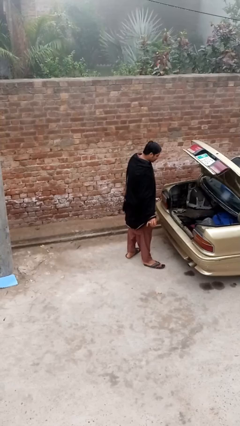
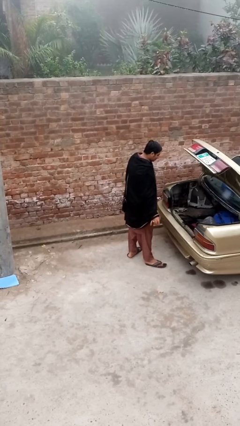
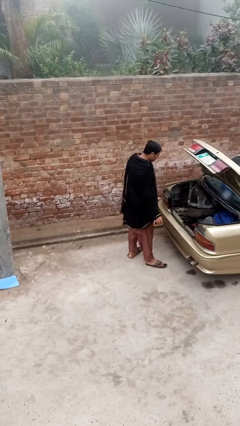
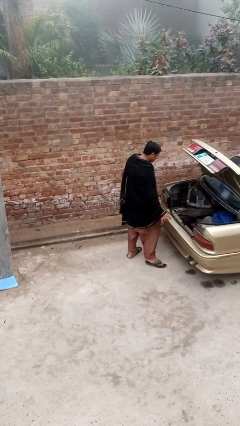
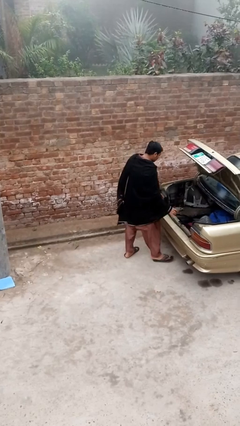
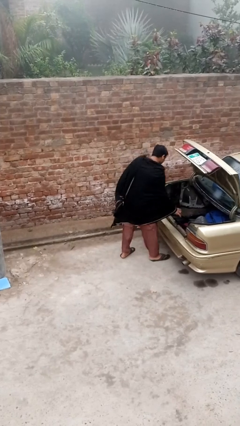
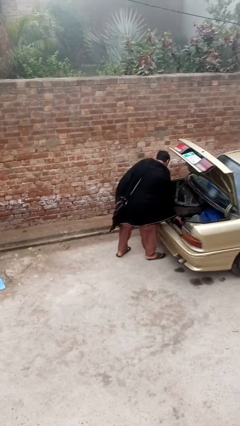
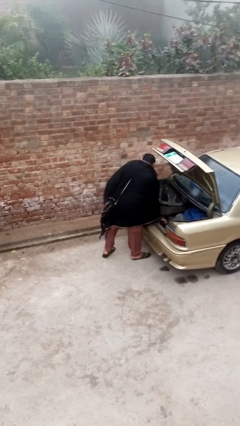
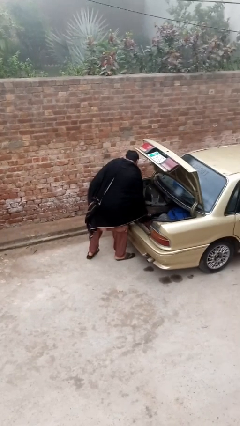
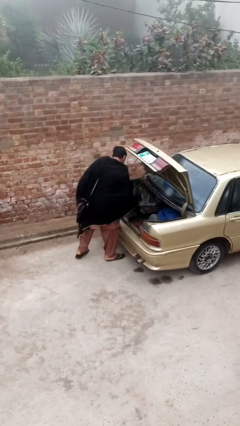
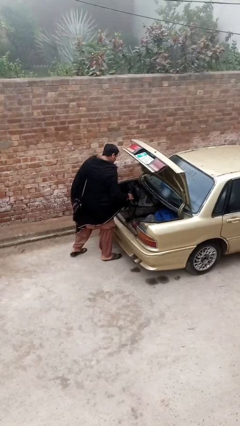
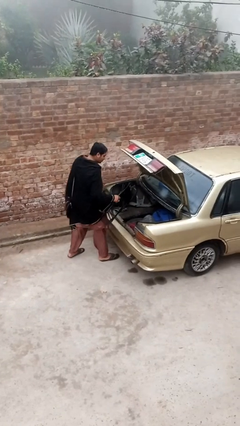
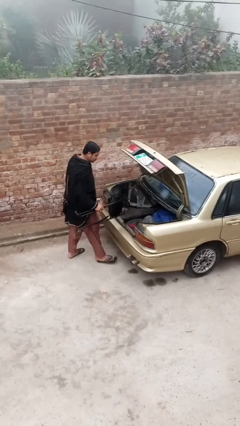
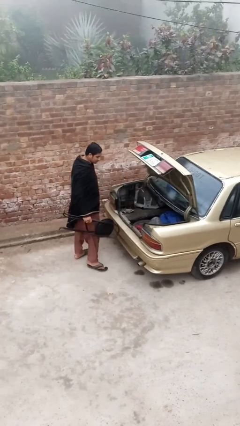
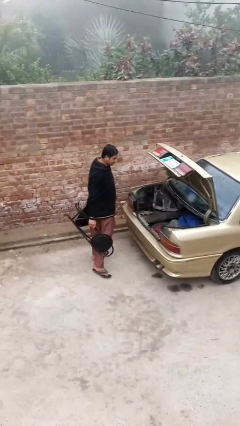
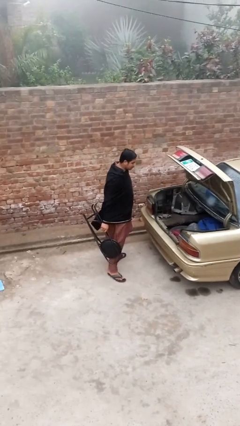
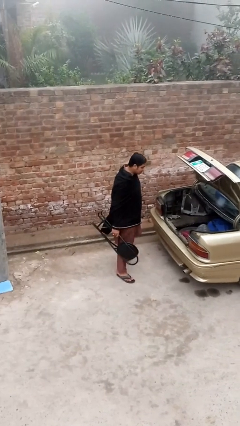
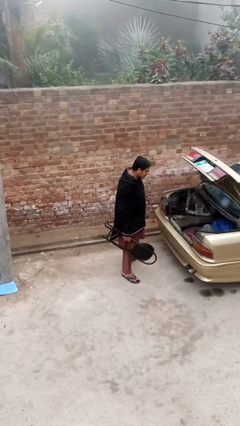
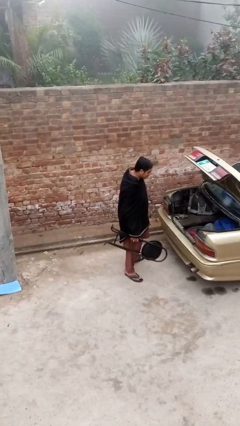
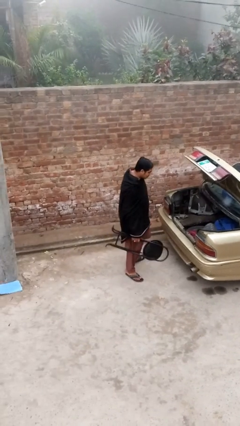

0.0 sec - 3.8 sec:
person unloads car

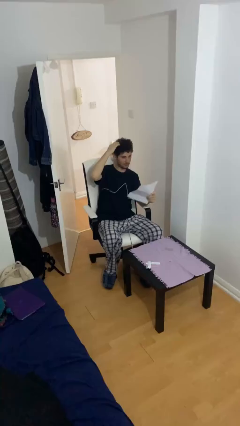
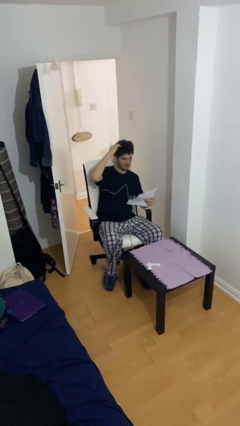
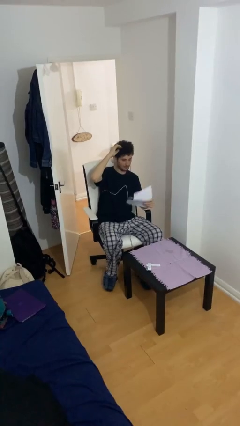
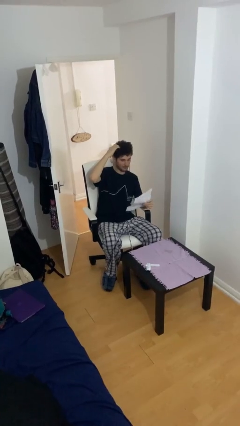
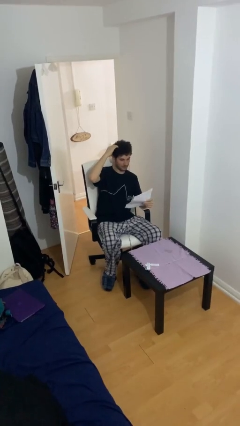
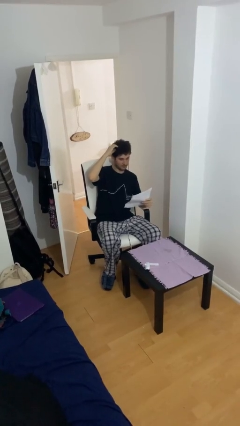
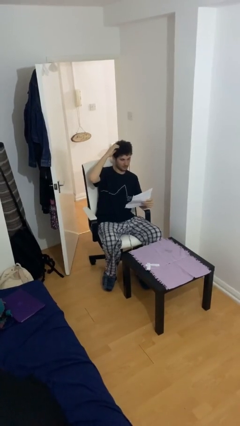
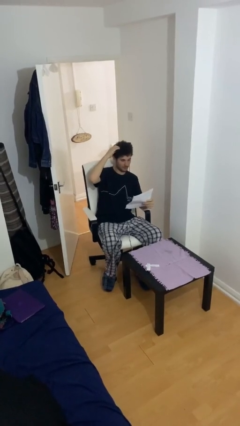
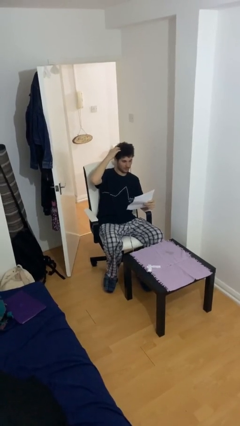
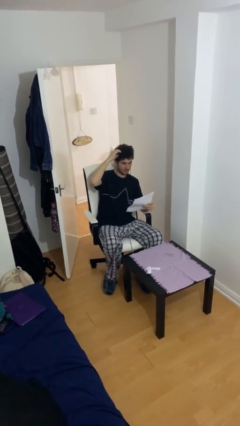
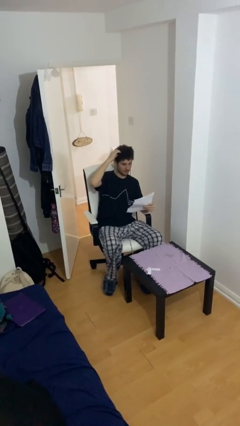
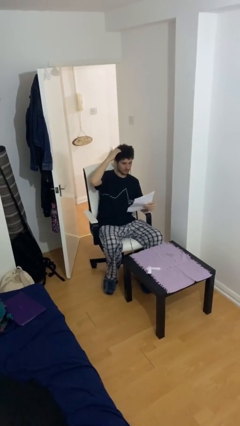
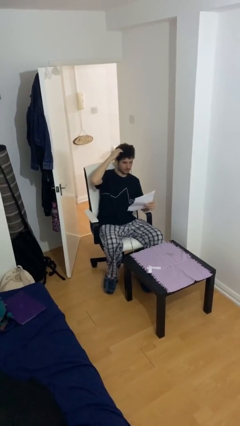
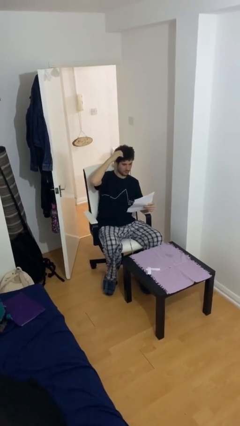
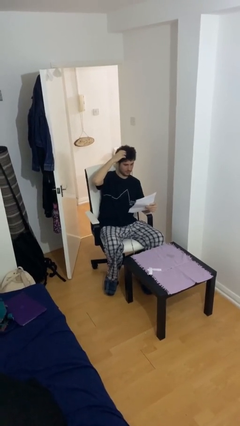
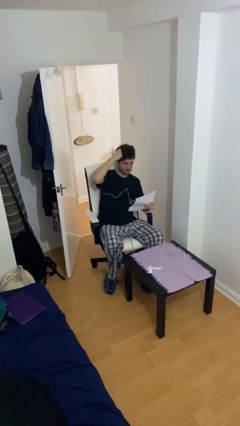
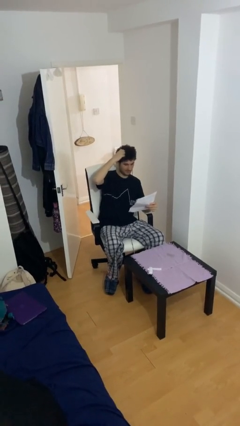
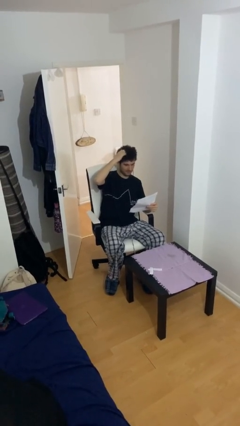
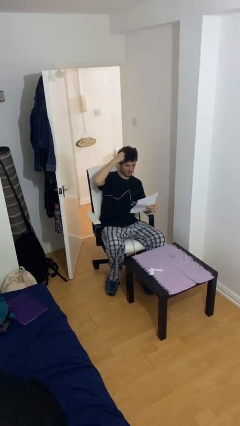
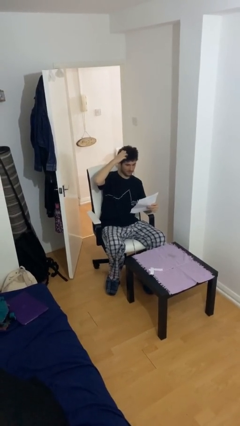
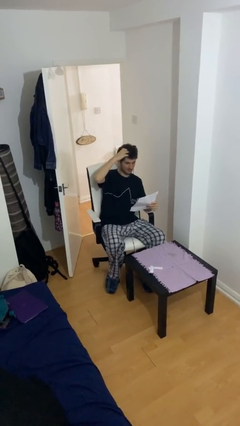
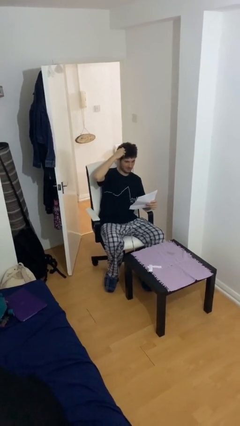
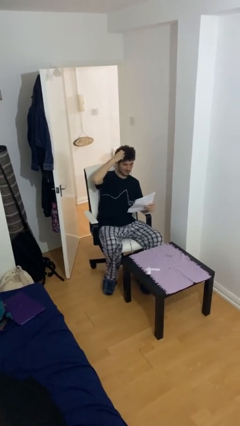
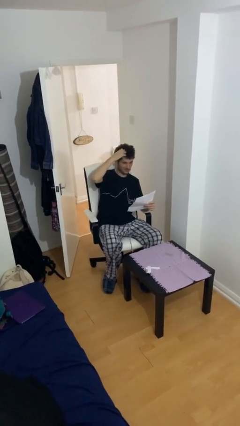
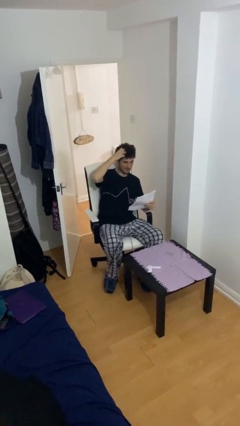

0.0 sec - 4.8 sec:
person reads document

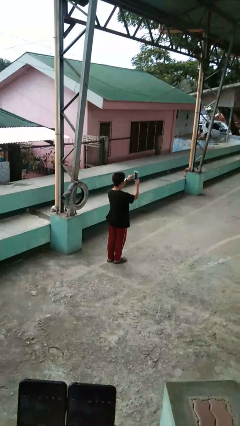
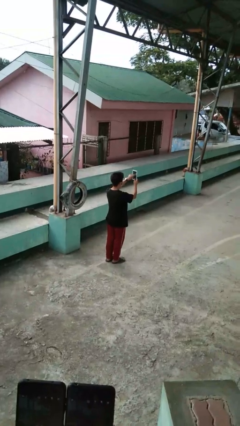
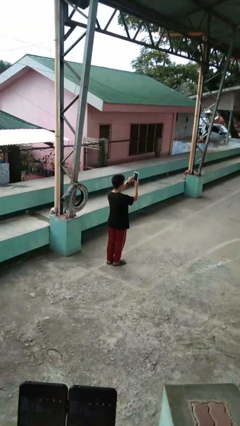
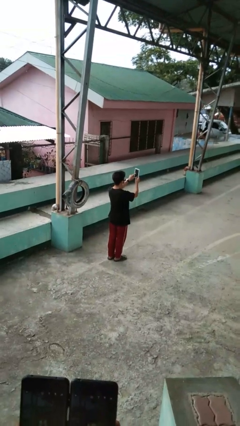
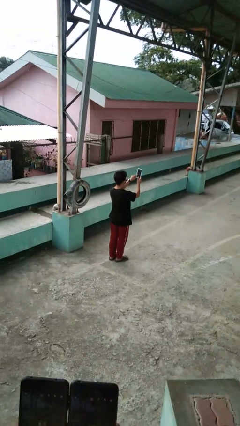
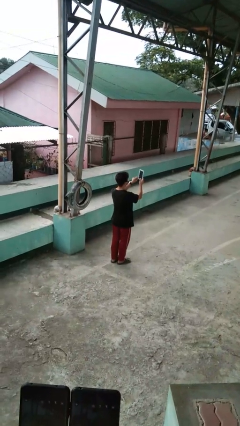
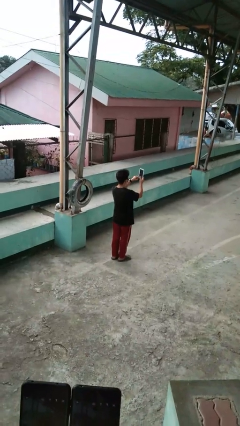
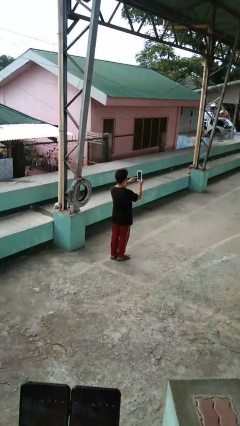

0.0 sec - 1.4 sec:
person interacts with tablet

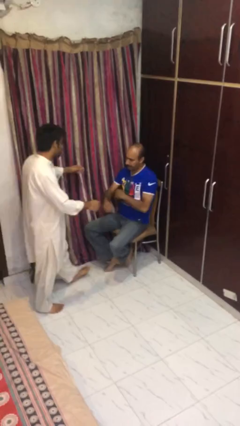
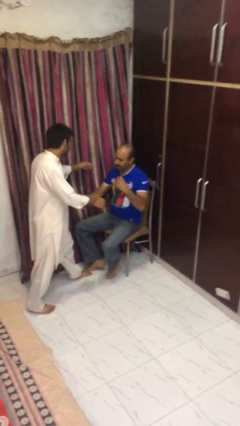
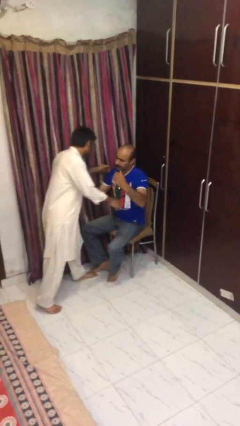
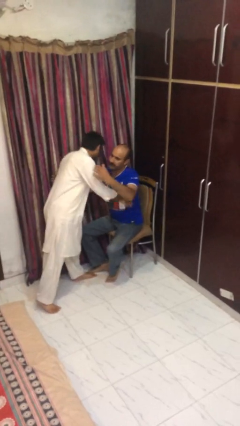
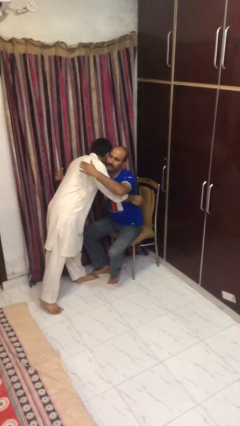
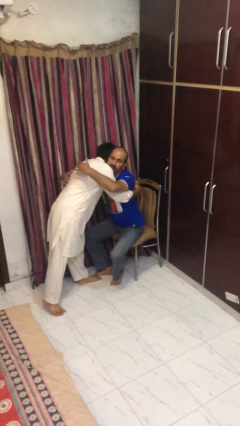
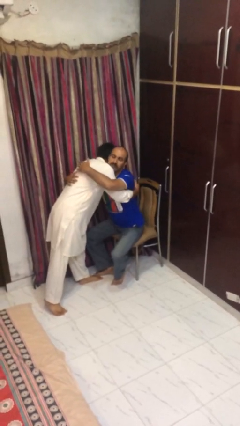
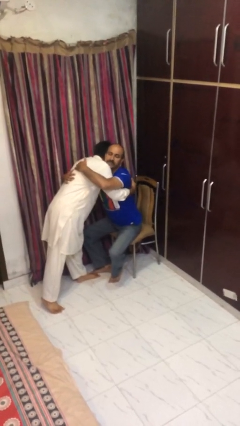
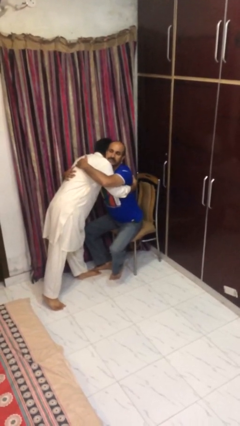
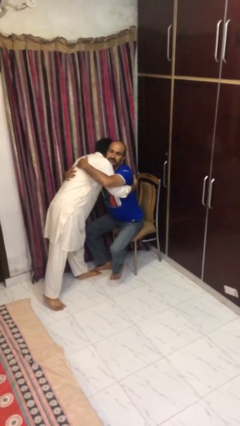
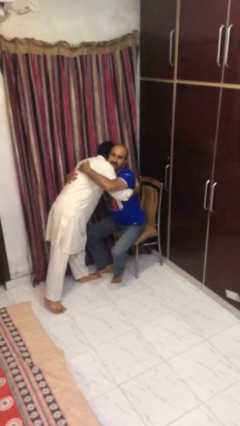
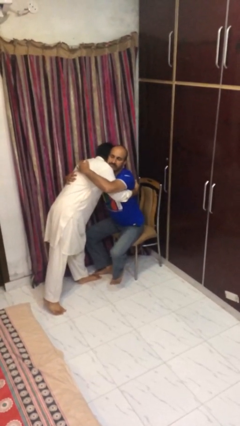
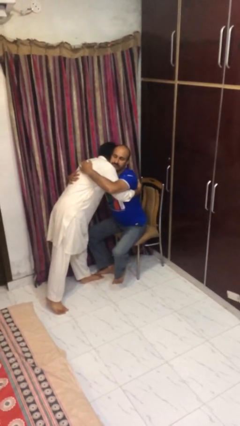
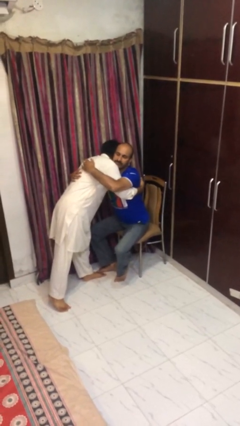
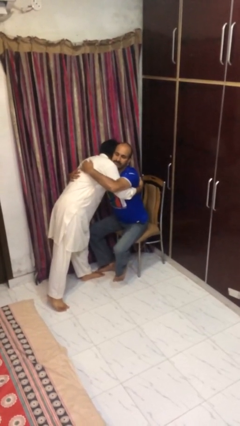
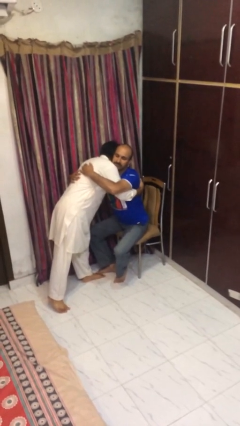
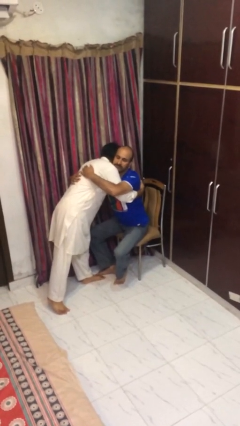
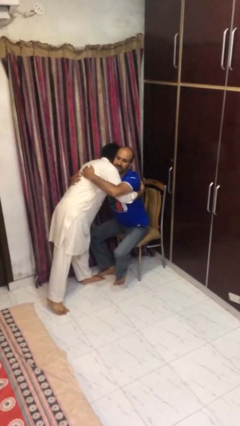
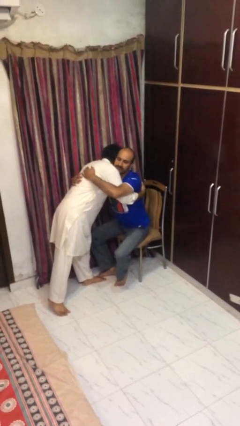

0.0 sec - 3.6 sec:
person embraces person

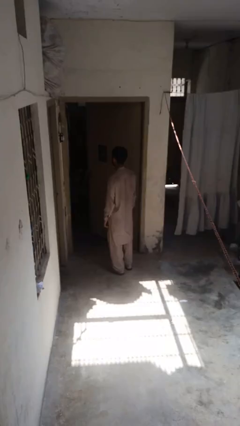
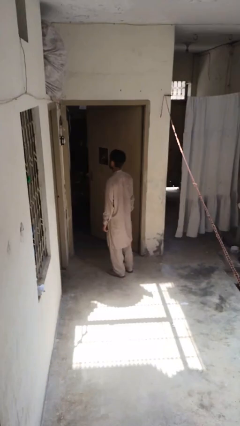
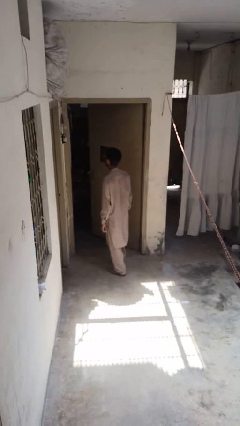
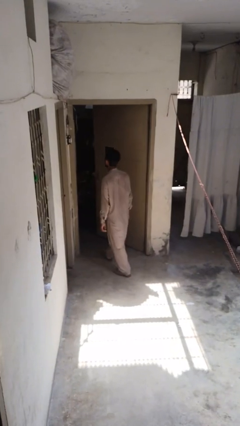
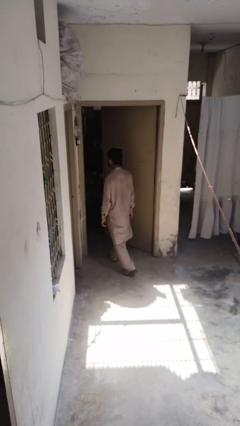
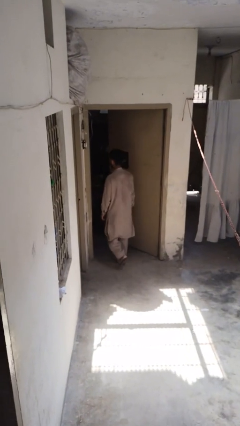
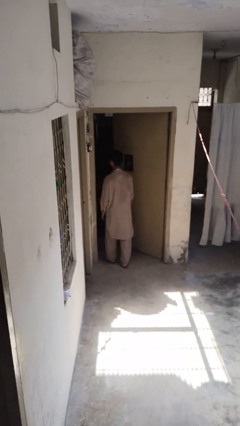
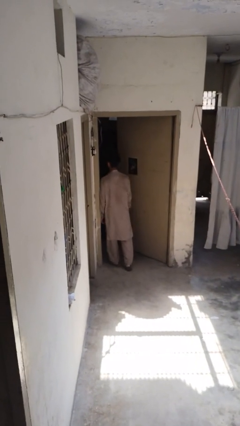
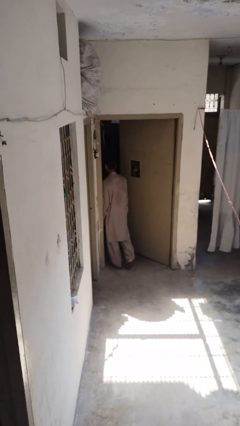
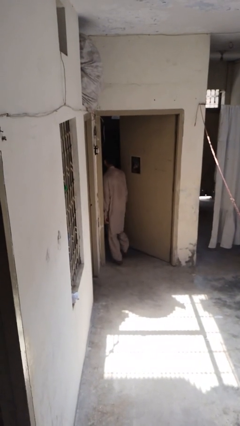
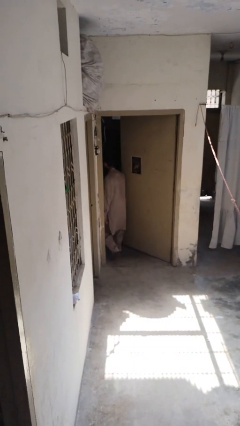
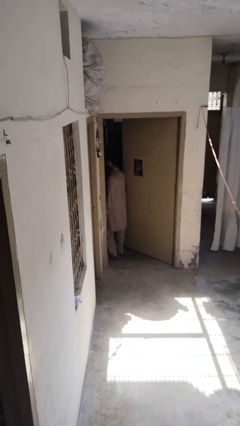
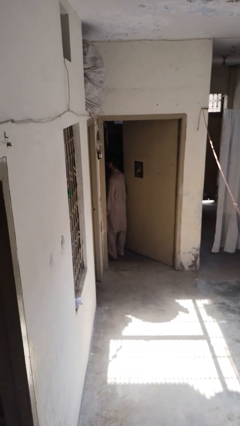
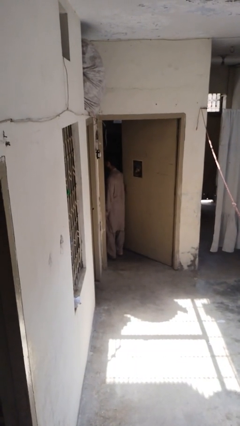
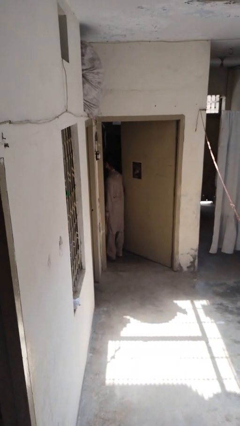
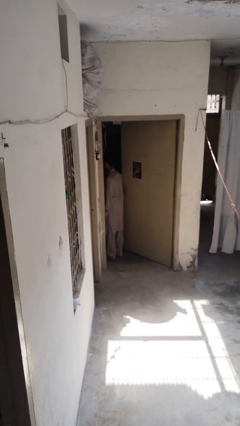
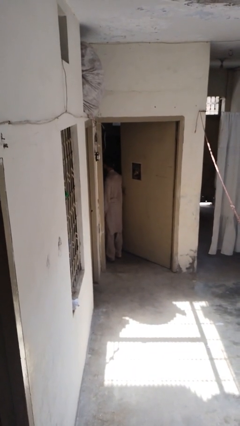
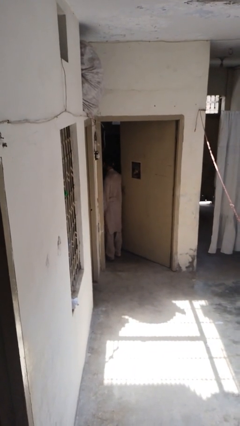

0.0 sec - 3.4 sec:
person bumps into wall

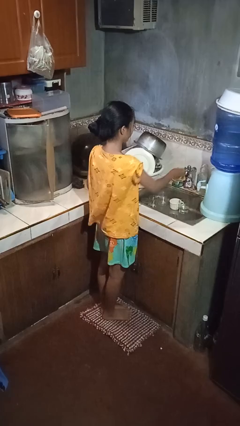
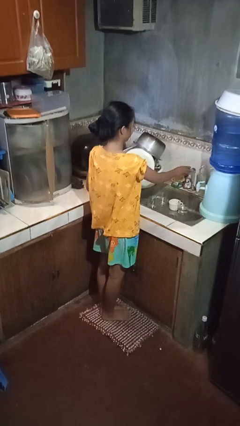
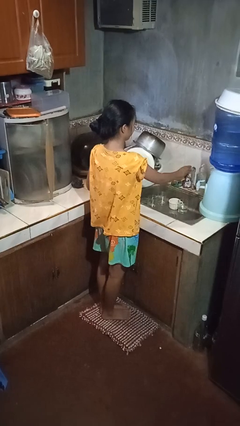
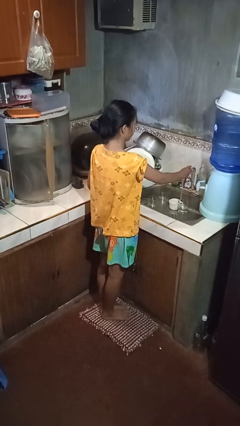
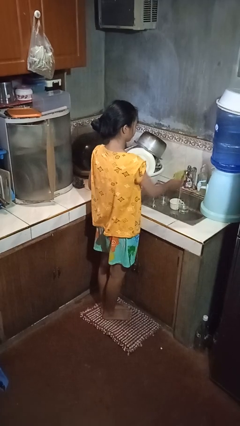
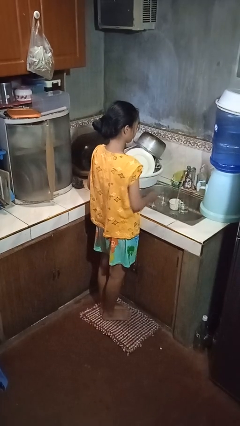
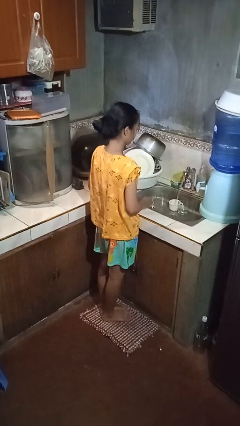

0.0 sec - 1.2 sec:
person turns on faucet
